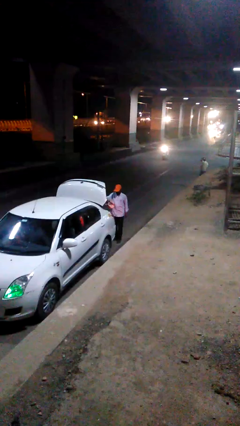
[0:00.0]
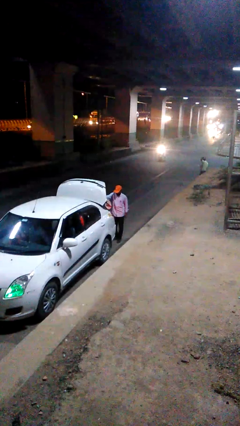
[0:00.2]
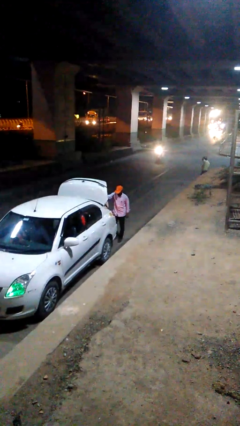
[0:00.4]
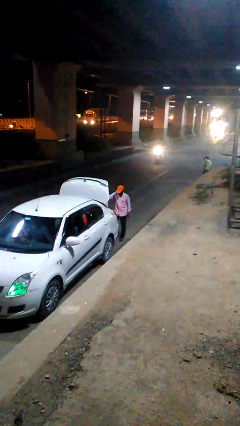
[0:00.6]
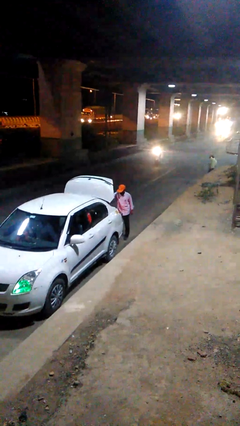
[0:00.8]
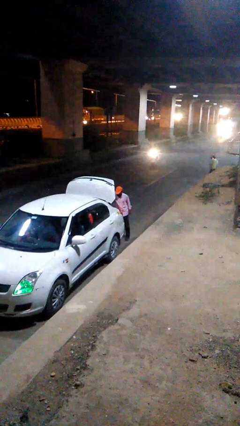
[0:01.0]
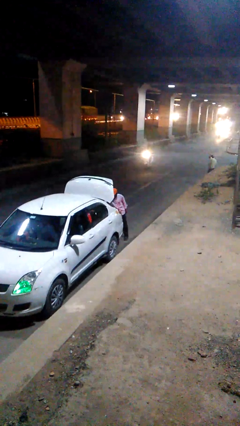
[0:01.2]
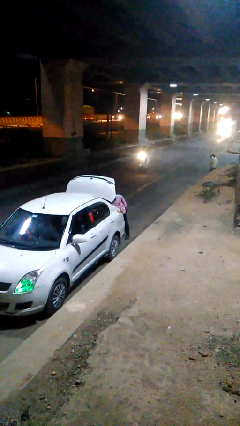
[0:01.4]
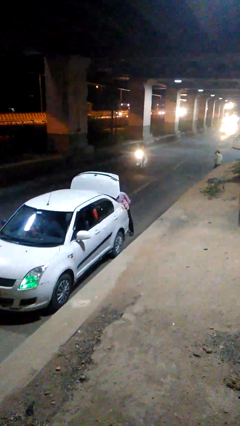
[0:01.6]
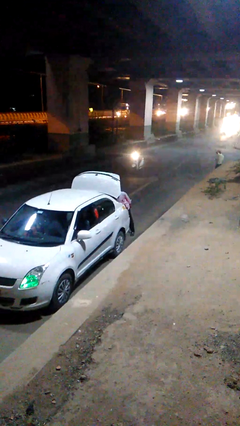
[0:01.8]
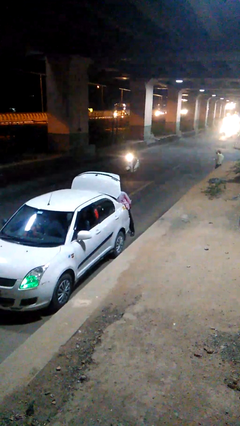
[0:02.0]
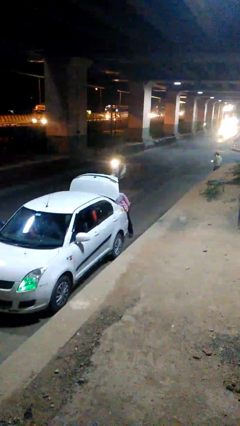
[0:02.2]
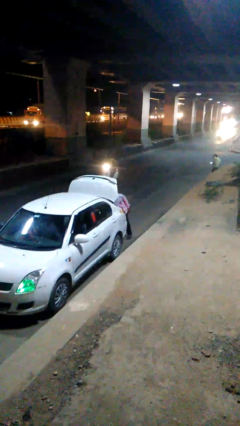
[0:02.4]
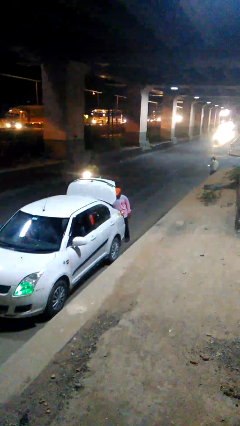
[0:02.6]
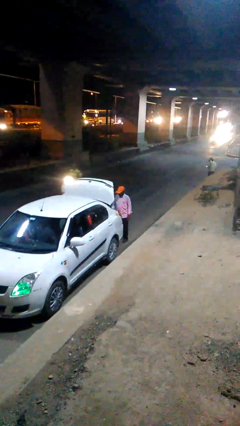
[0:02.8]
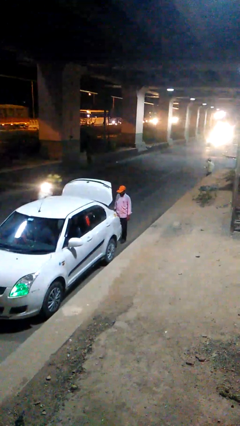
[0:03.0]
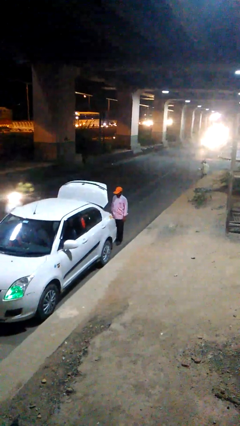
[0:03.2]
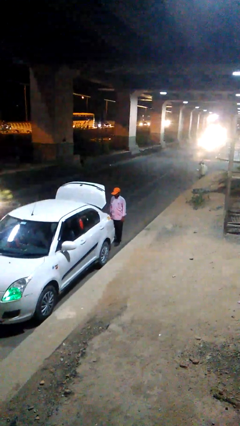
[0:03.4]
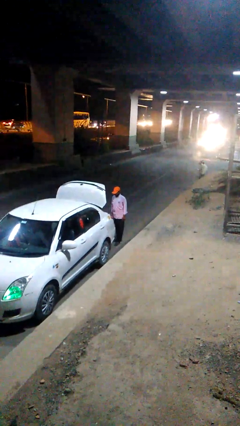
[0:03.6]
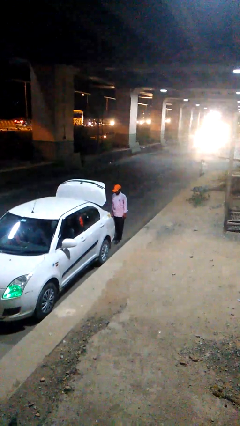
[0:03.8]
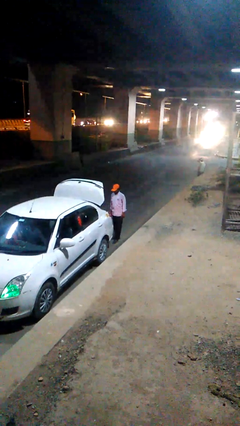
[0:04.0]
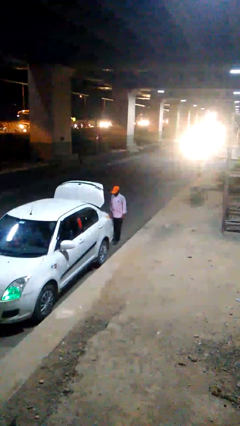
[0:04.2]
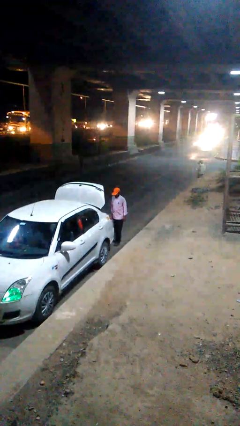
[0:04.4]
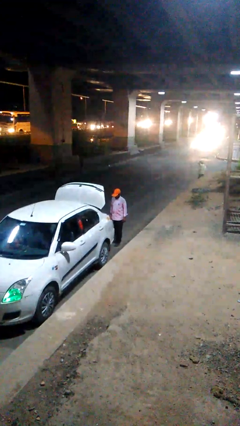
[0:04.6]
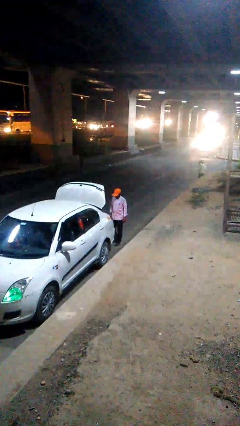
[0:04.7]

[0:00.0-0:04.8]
person loads car

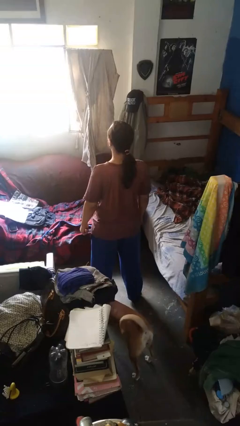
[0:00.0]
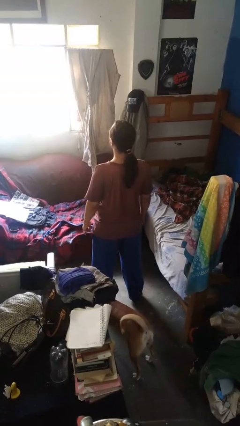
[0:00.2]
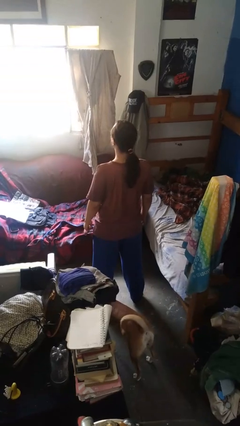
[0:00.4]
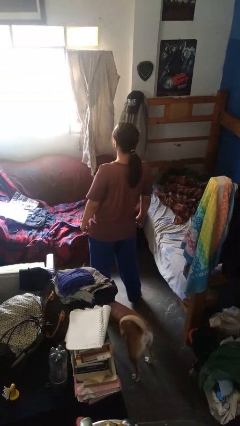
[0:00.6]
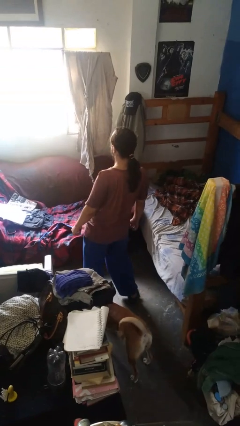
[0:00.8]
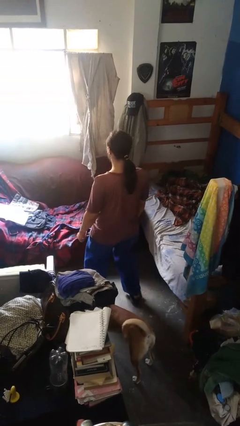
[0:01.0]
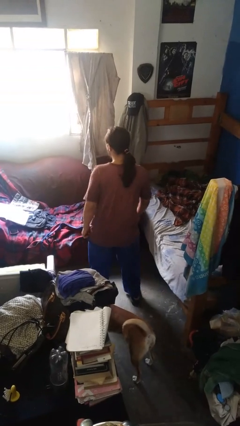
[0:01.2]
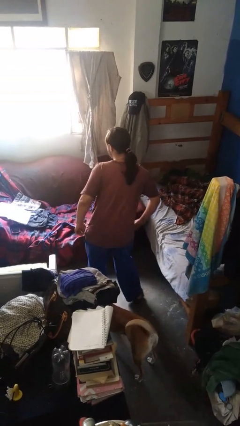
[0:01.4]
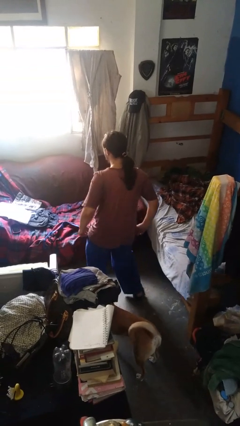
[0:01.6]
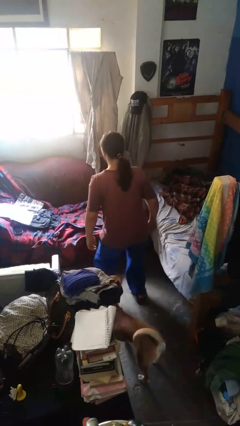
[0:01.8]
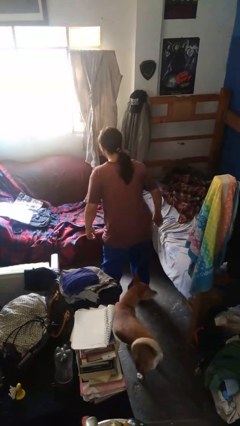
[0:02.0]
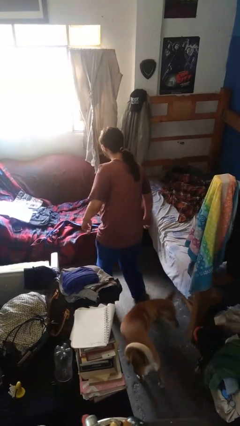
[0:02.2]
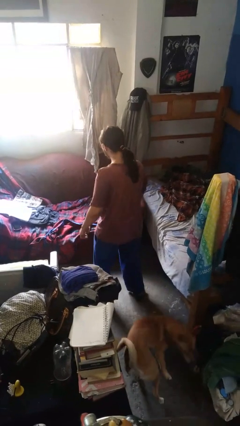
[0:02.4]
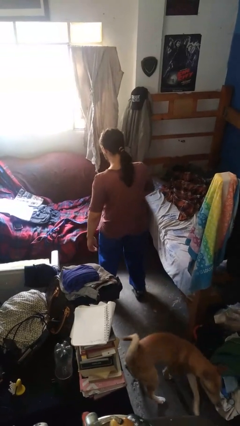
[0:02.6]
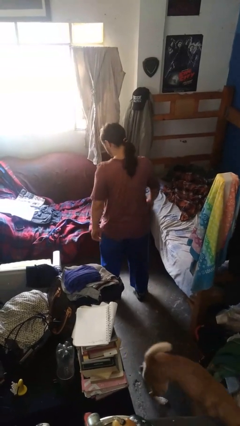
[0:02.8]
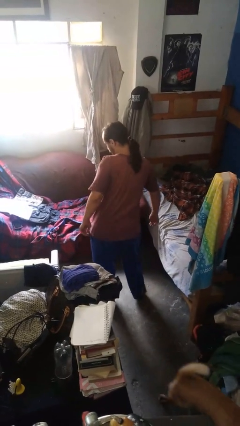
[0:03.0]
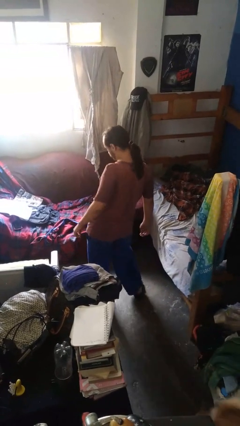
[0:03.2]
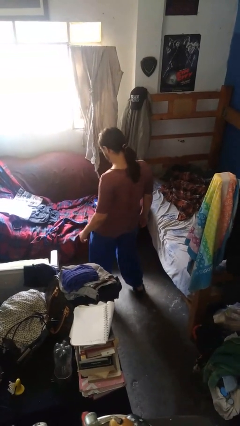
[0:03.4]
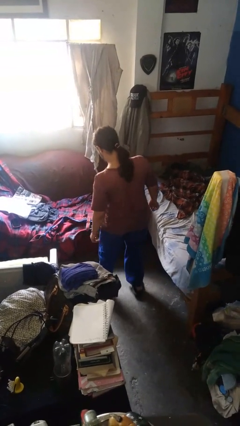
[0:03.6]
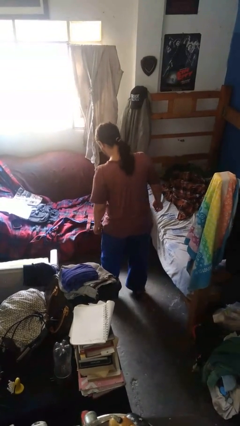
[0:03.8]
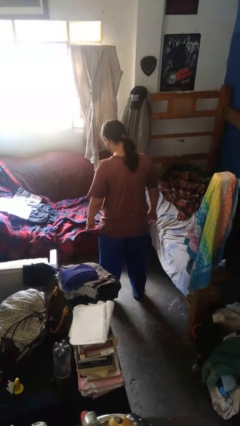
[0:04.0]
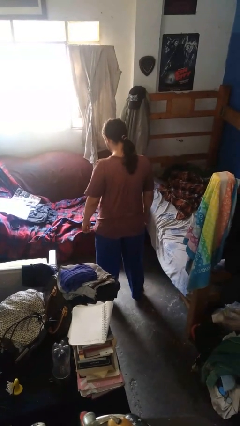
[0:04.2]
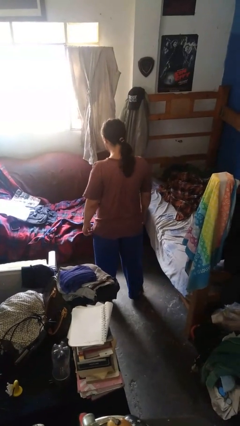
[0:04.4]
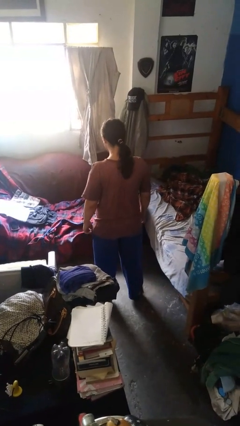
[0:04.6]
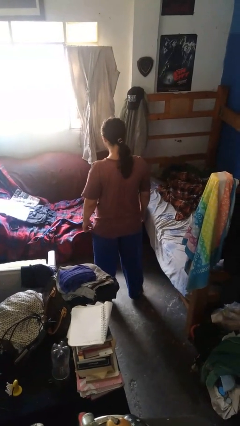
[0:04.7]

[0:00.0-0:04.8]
person wiggles hips

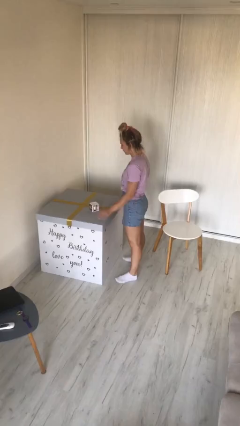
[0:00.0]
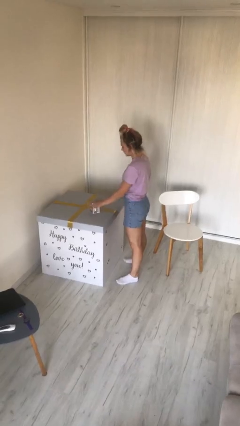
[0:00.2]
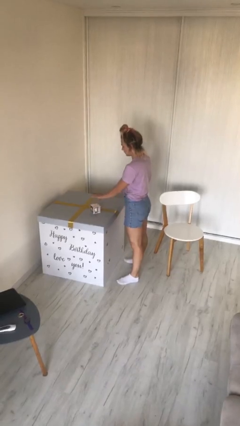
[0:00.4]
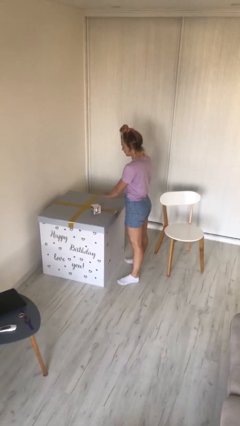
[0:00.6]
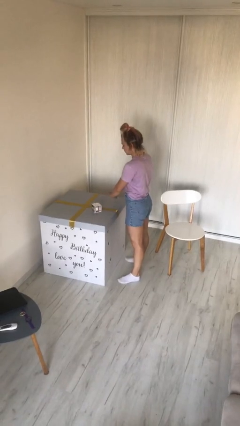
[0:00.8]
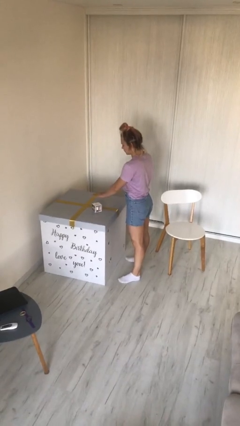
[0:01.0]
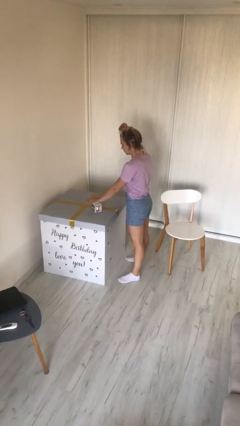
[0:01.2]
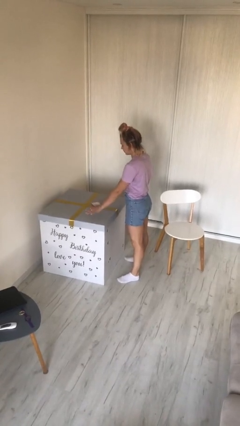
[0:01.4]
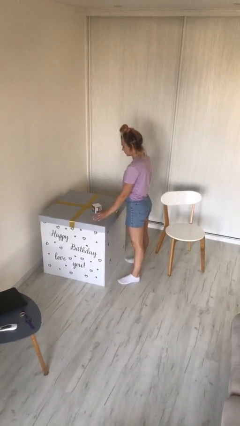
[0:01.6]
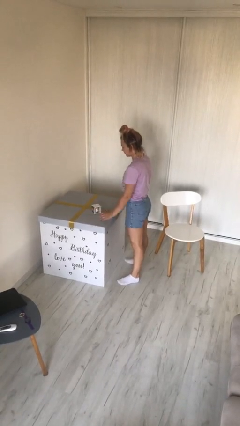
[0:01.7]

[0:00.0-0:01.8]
person waves hand over object

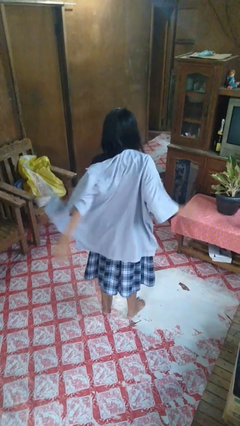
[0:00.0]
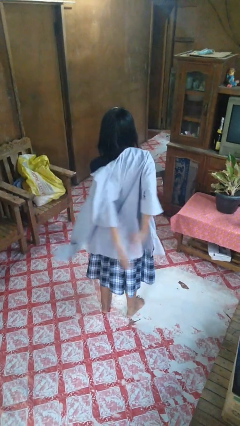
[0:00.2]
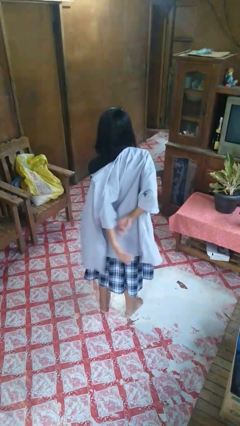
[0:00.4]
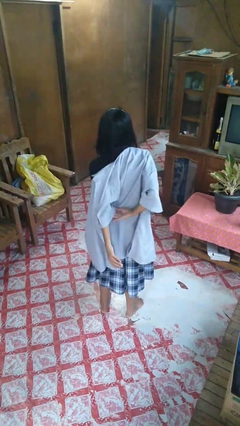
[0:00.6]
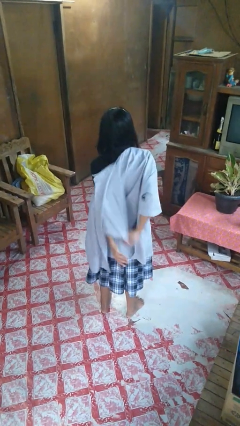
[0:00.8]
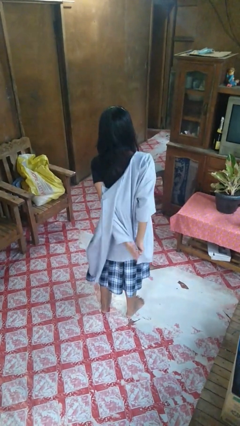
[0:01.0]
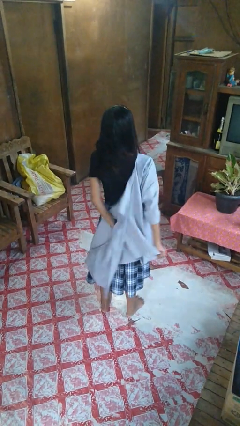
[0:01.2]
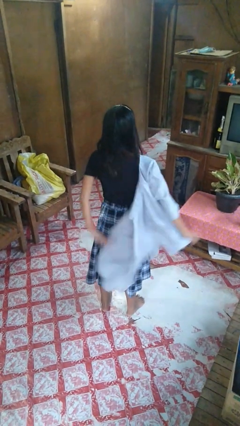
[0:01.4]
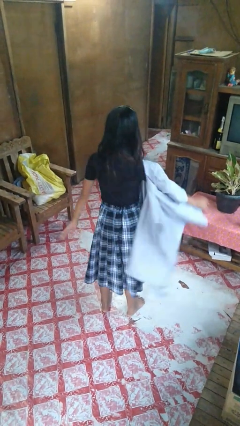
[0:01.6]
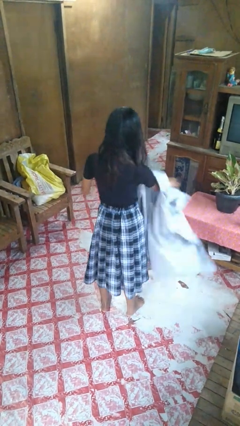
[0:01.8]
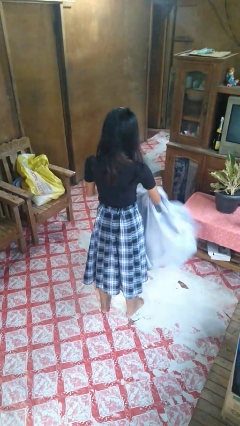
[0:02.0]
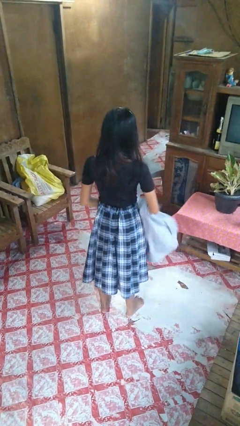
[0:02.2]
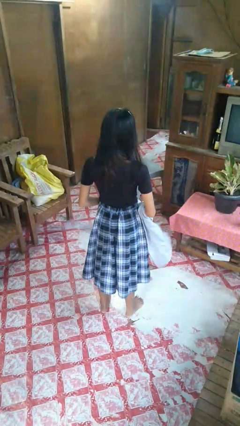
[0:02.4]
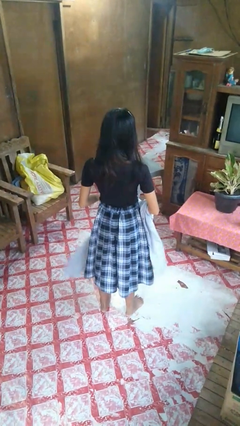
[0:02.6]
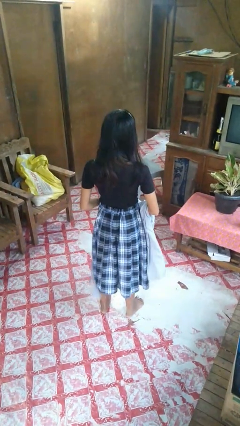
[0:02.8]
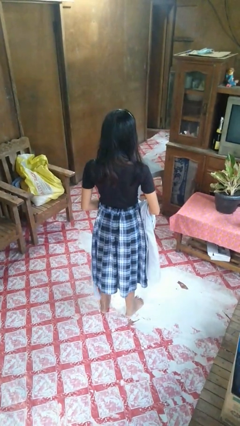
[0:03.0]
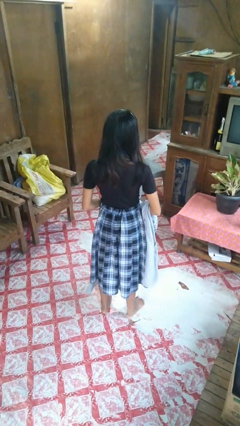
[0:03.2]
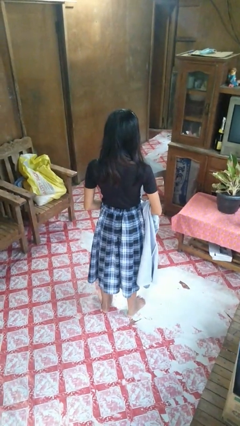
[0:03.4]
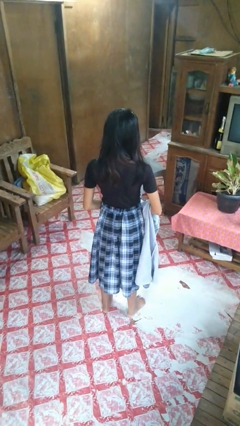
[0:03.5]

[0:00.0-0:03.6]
person takes off shirt

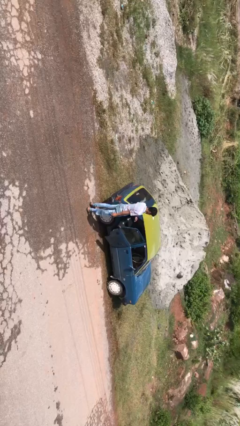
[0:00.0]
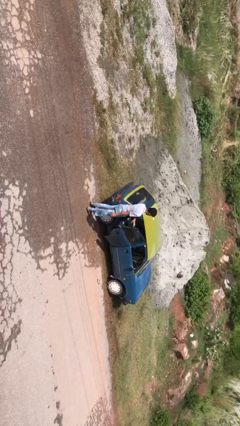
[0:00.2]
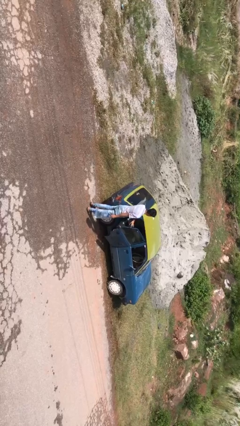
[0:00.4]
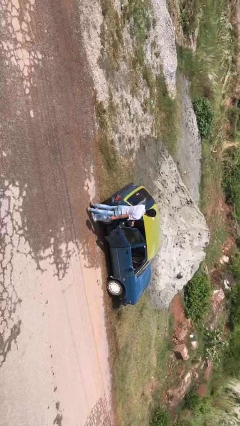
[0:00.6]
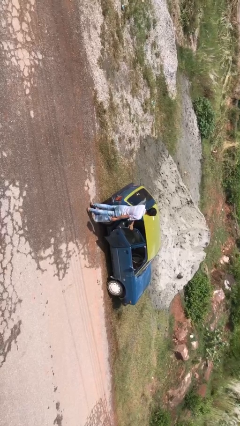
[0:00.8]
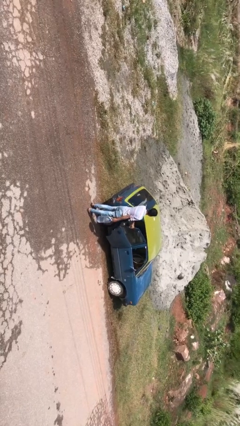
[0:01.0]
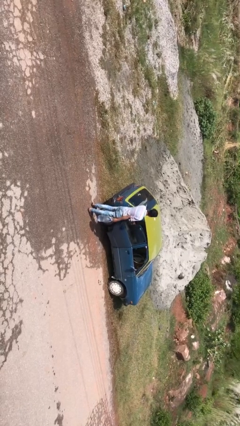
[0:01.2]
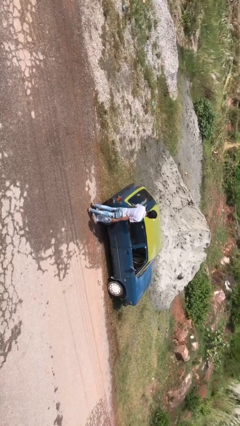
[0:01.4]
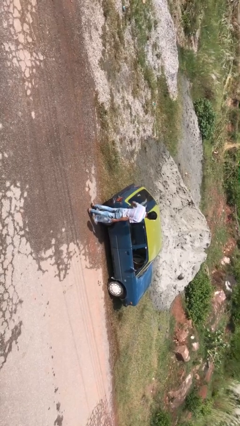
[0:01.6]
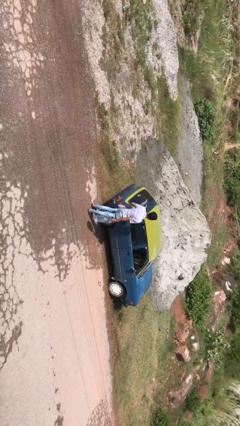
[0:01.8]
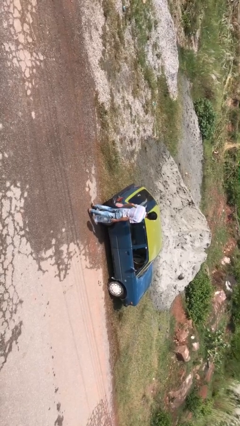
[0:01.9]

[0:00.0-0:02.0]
person closes car door

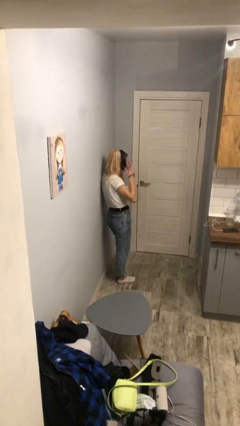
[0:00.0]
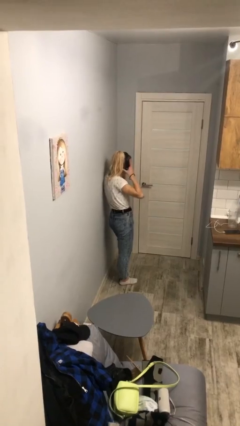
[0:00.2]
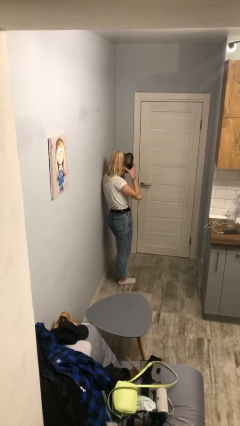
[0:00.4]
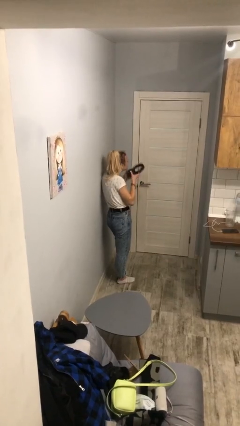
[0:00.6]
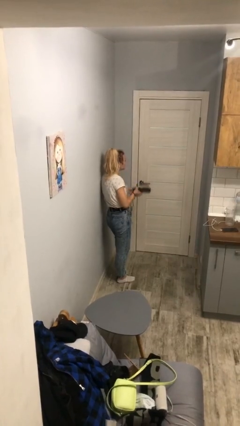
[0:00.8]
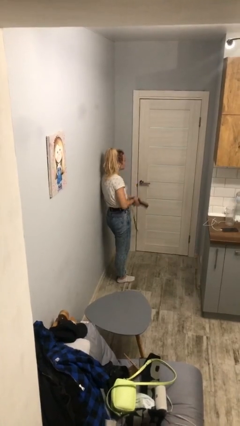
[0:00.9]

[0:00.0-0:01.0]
person takes off headphones
